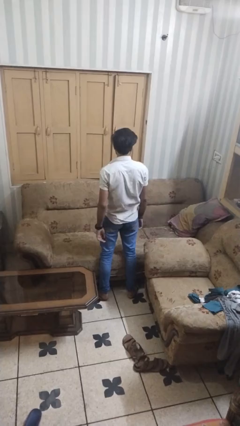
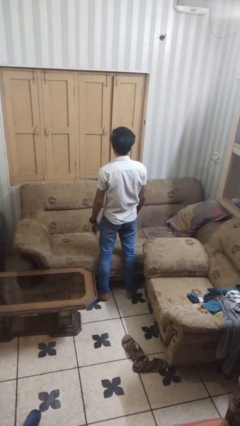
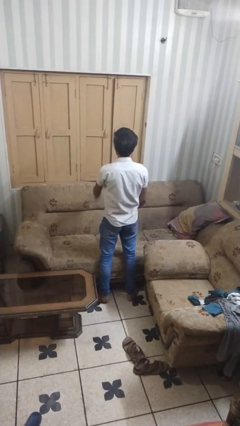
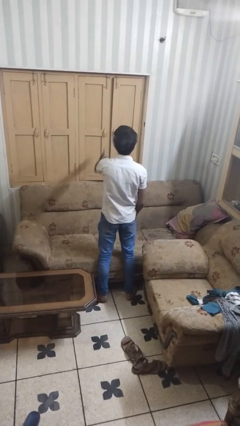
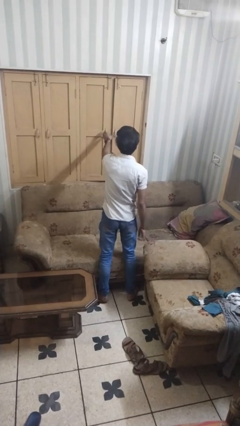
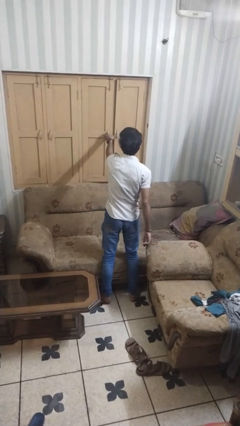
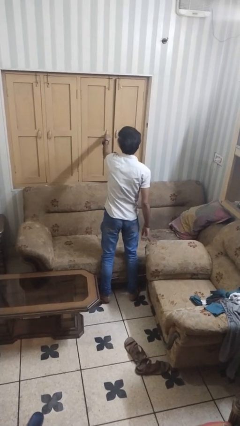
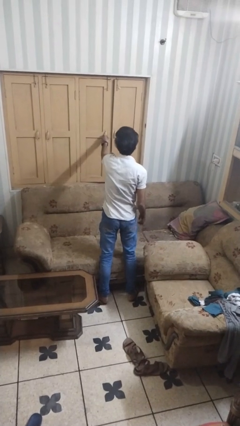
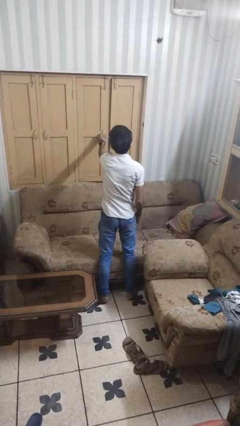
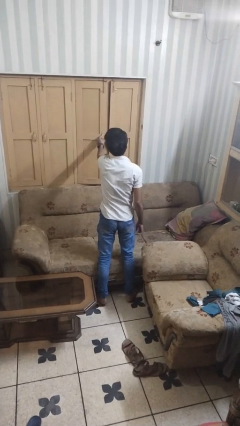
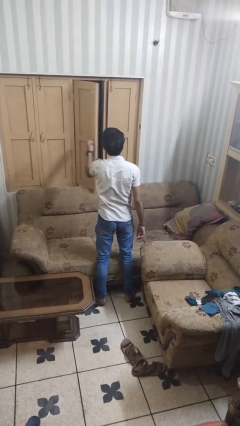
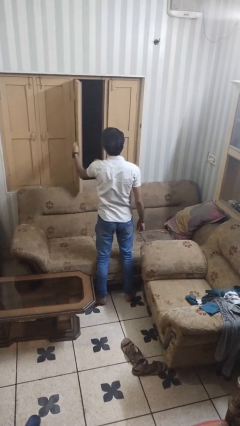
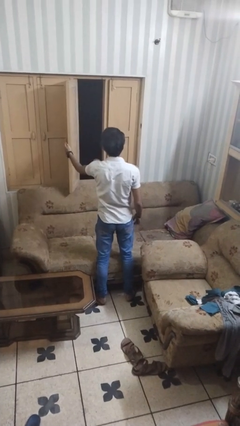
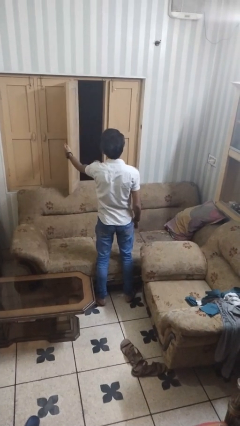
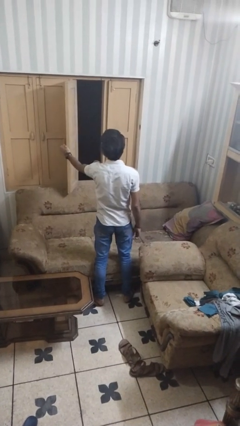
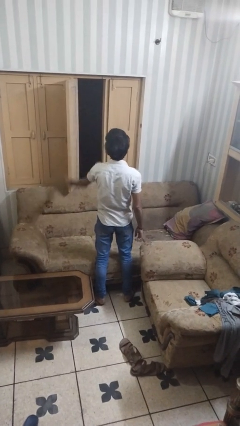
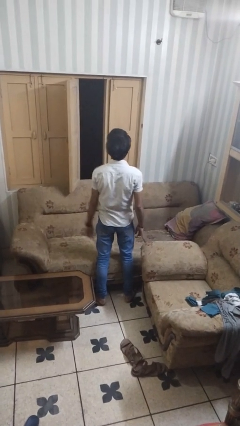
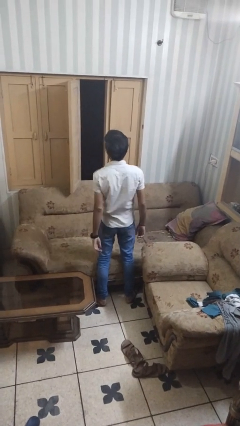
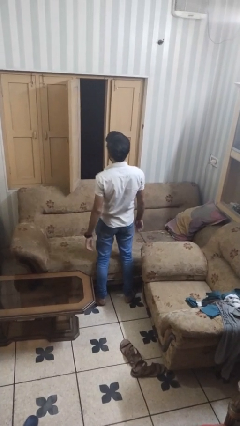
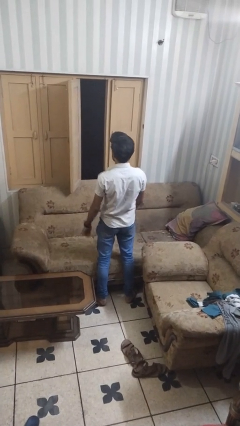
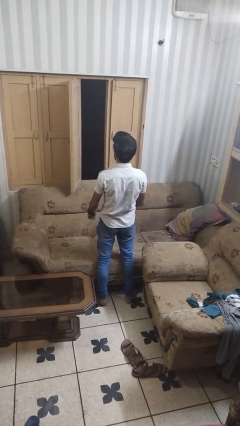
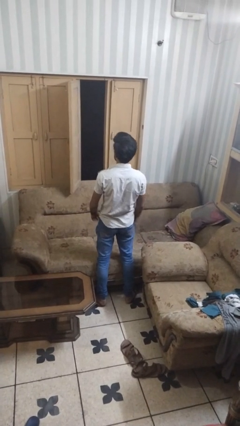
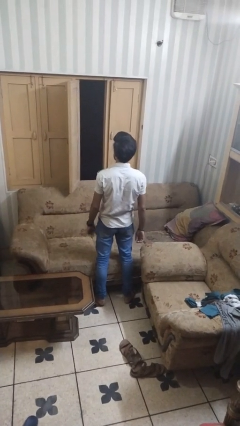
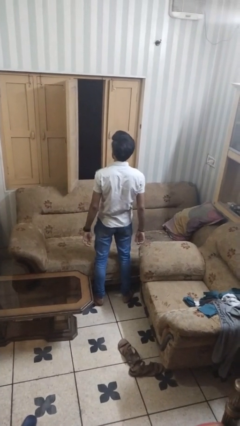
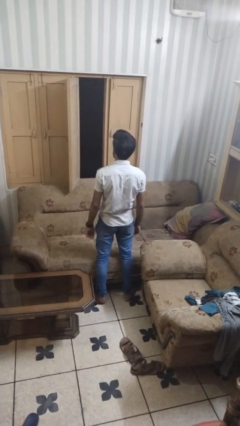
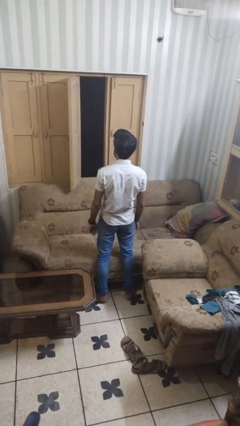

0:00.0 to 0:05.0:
person opens home window

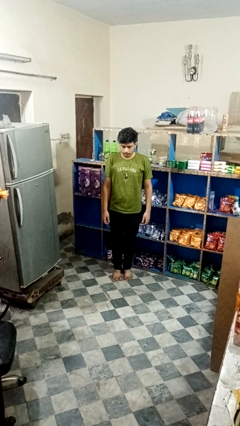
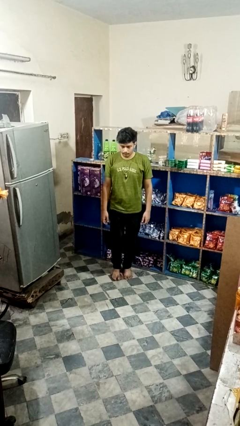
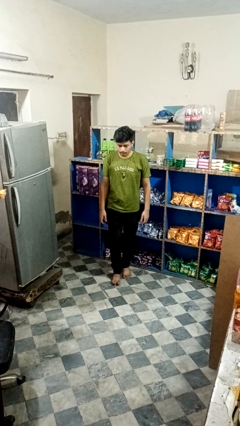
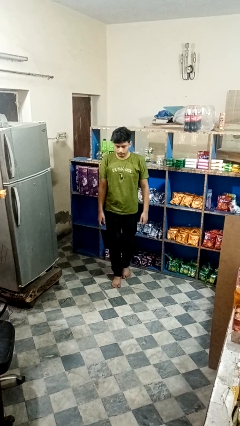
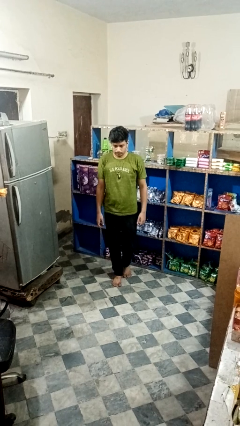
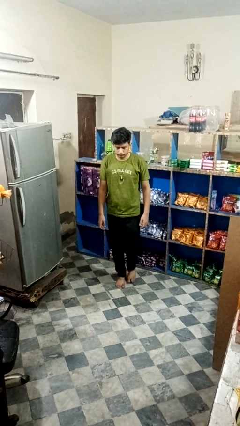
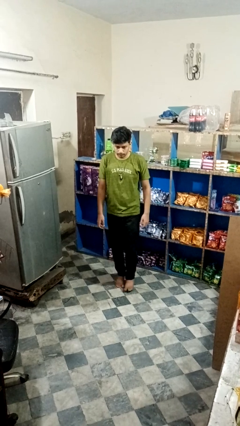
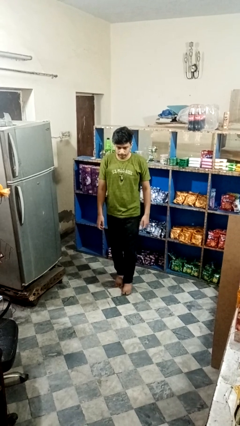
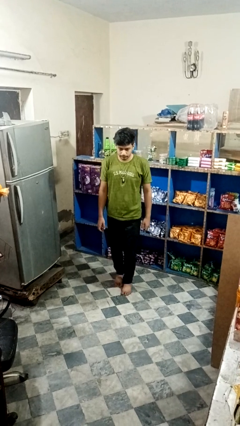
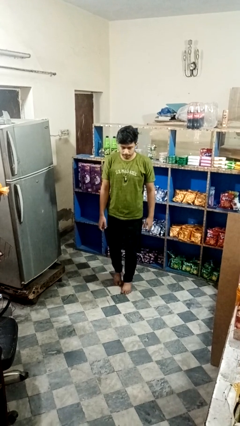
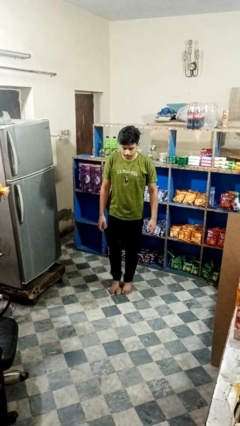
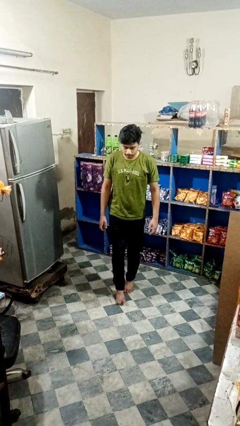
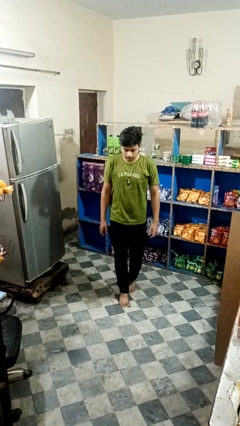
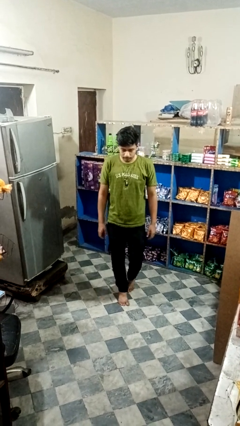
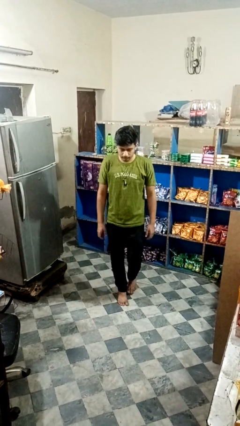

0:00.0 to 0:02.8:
person walks tiptoe

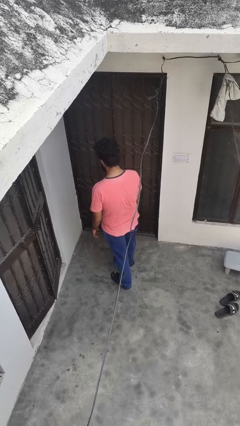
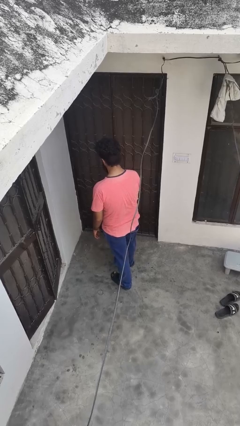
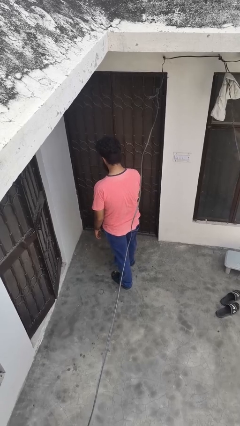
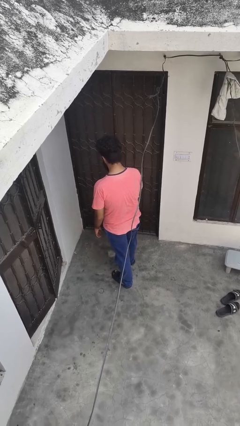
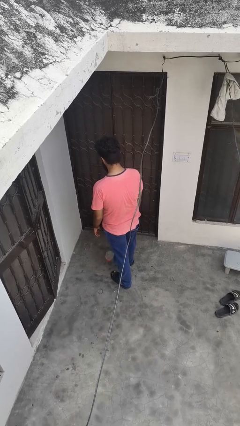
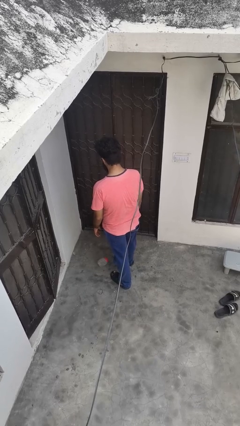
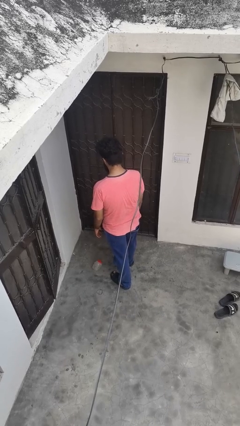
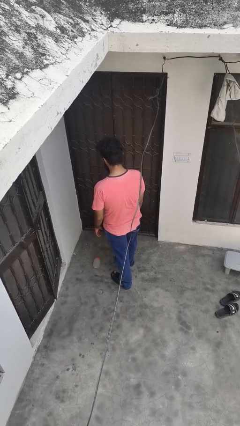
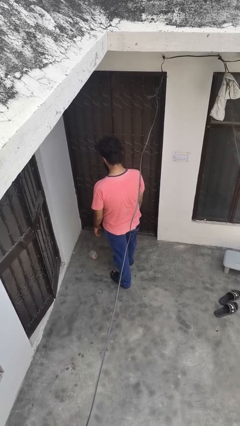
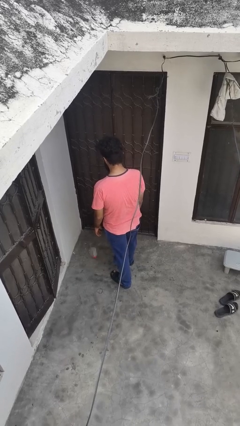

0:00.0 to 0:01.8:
person drops object

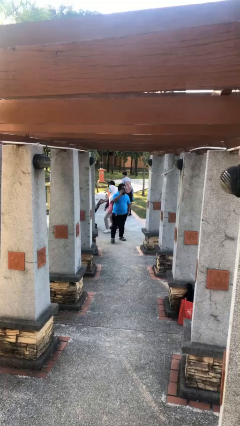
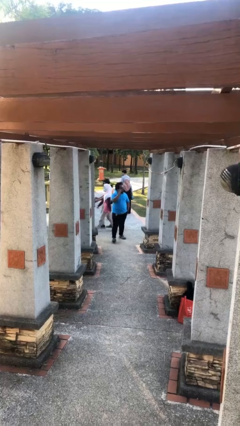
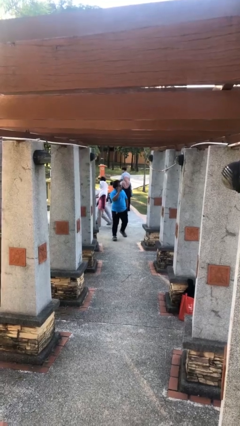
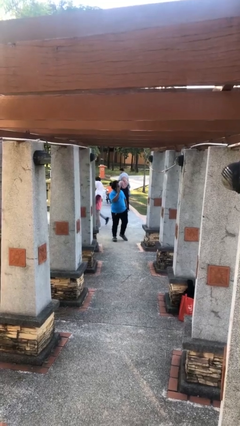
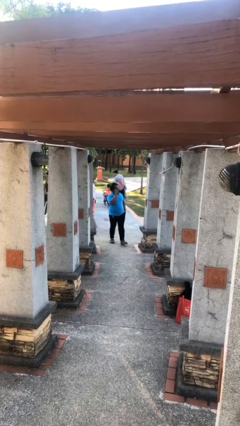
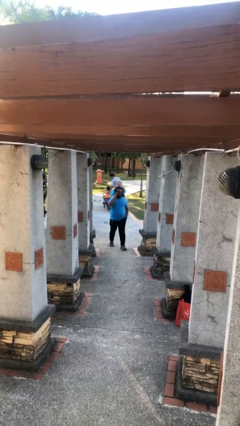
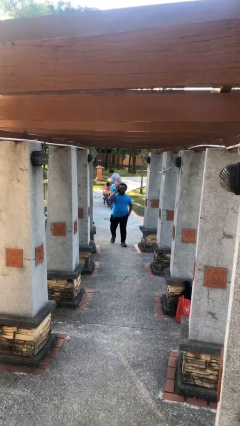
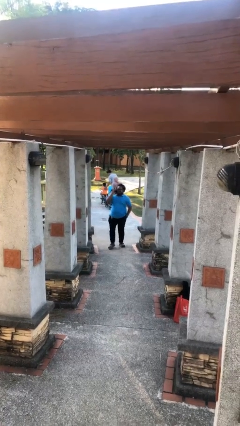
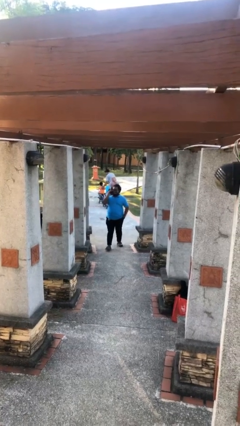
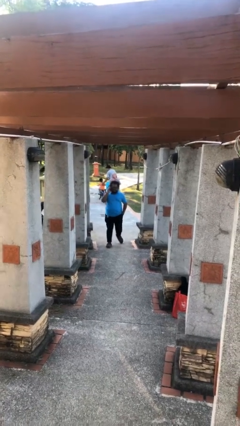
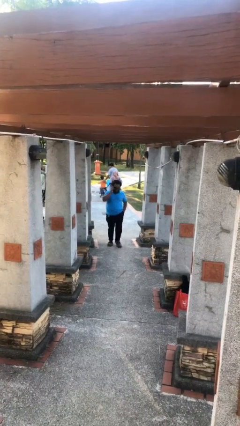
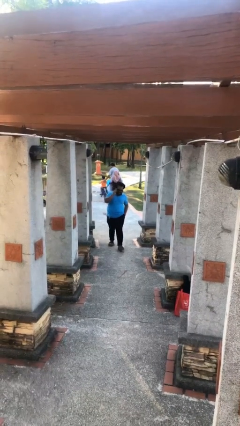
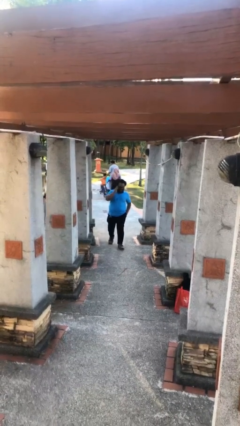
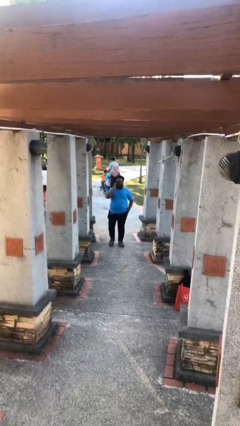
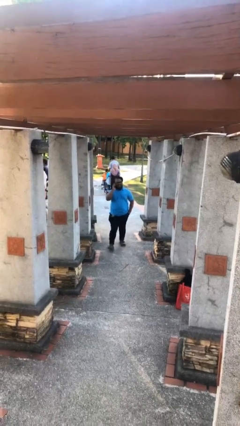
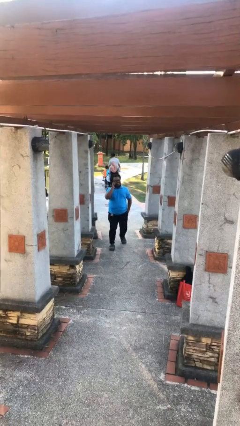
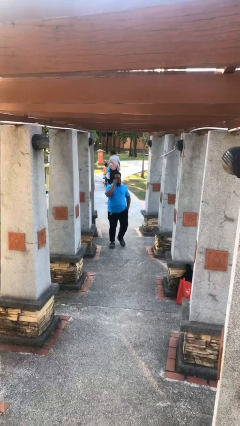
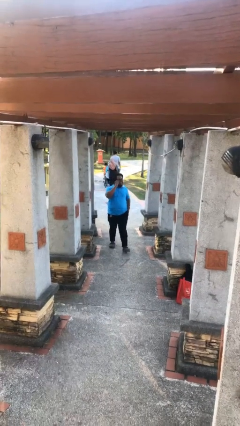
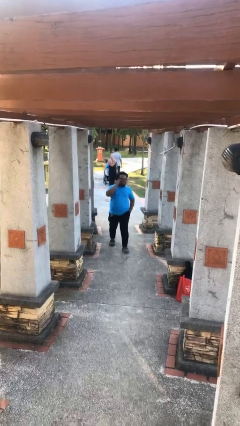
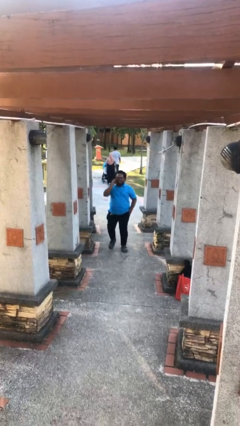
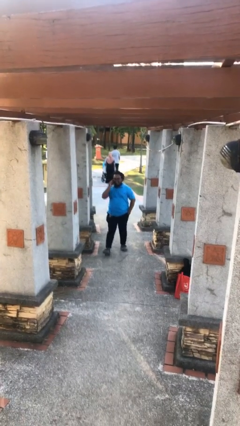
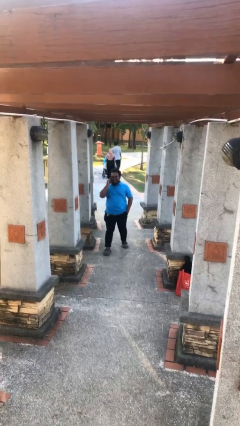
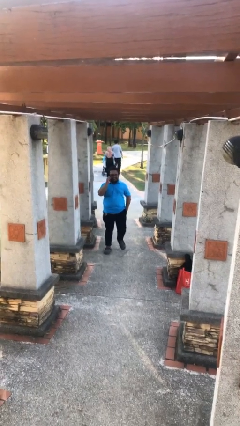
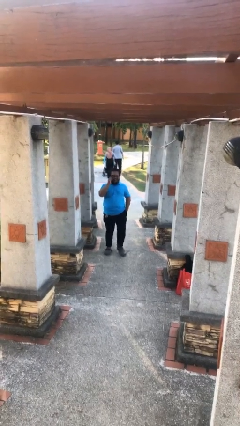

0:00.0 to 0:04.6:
person enters scene through structure

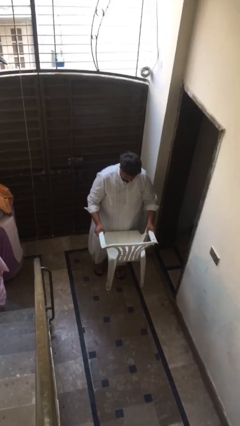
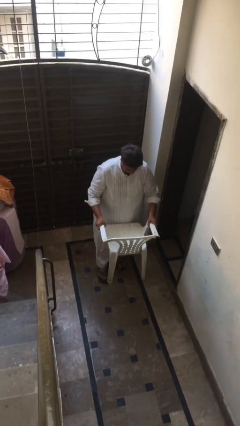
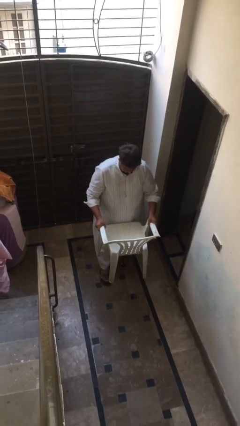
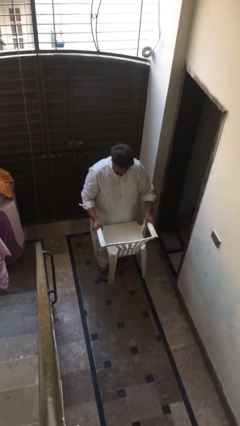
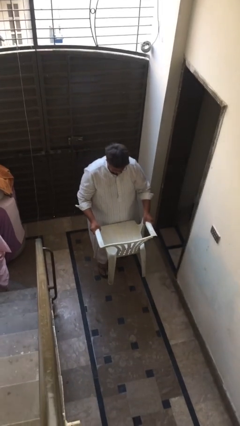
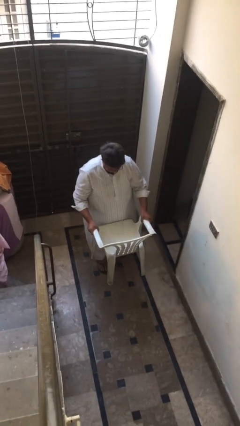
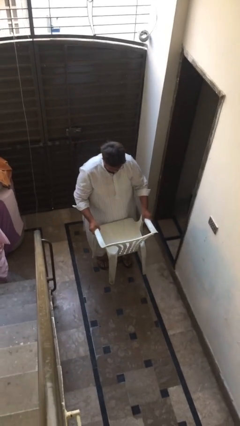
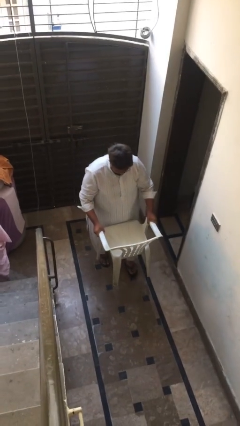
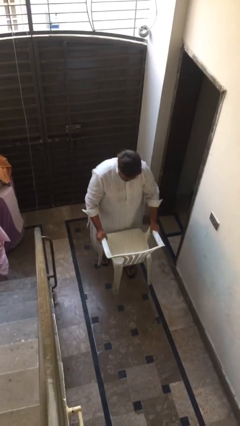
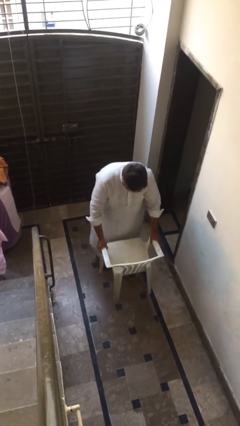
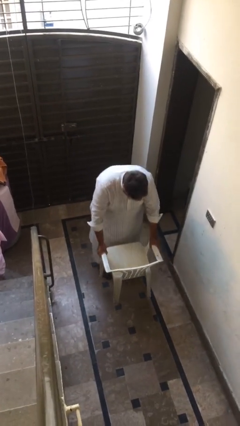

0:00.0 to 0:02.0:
person puts down object on floor

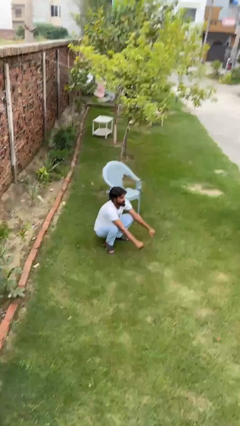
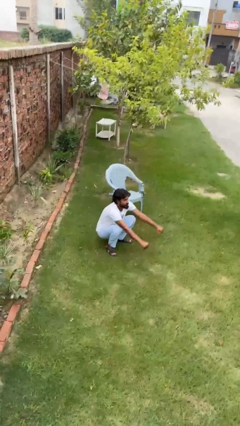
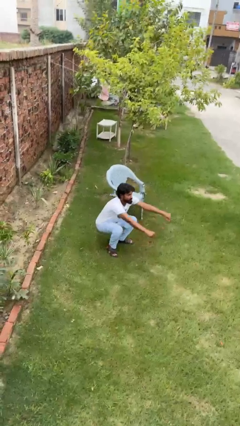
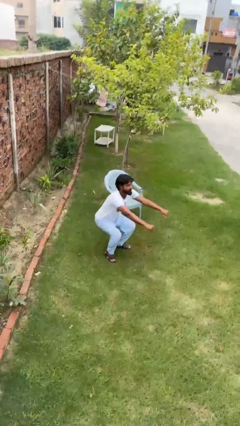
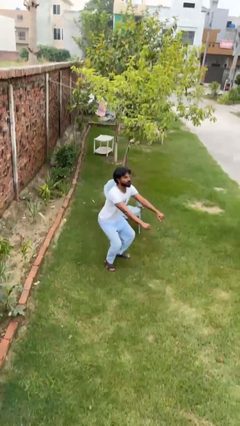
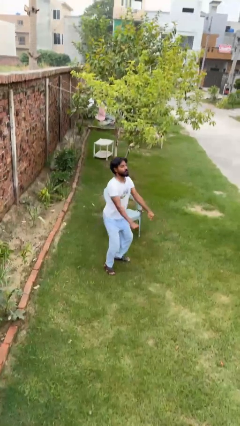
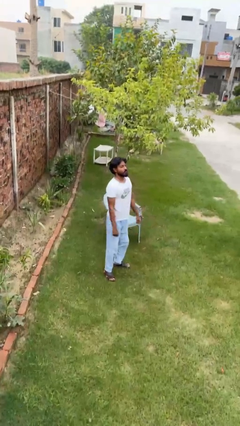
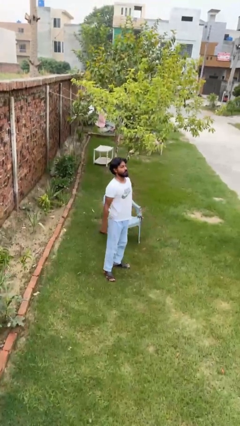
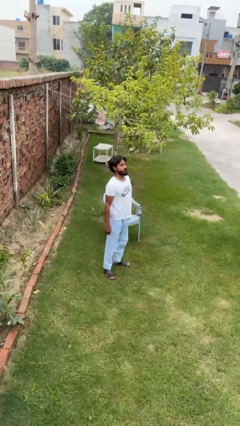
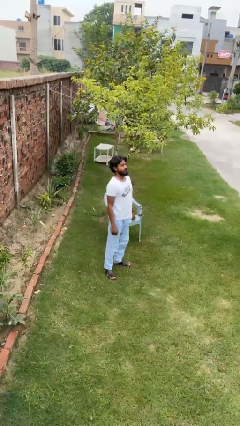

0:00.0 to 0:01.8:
person stands up
